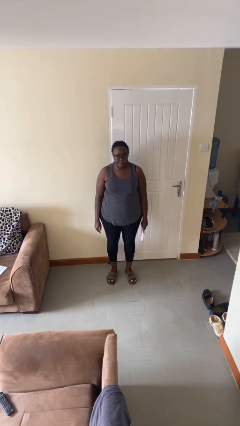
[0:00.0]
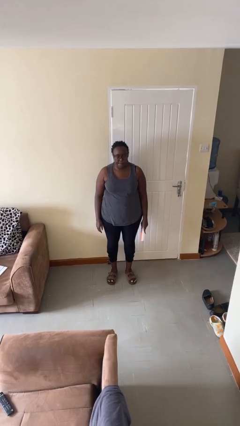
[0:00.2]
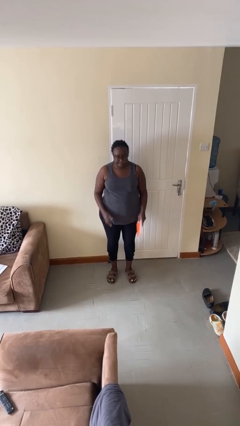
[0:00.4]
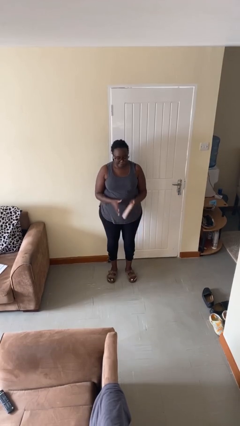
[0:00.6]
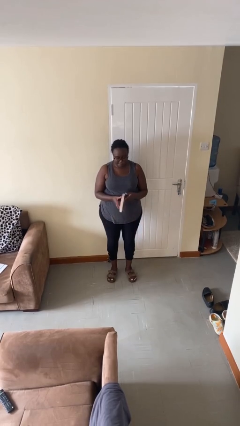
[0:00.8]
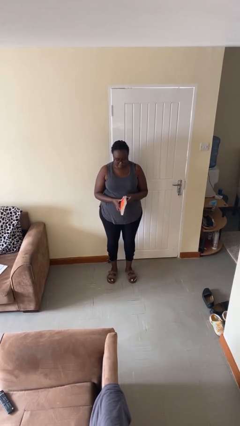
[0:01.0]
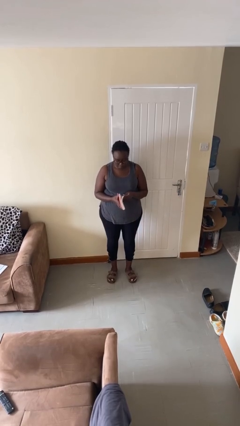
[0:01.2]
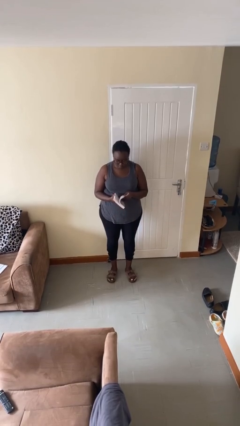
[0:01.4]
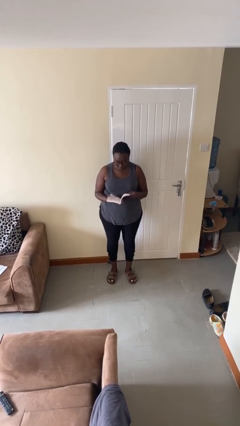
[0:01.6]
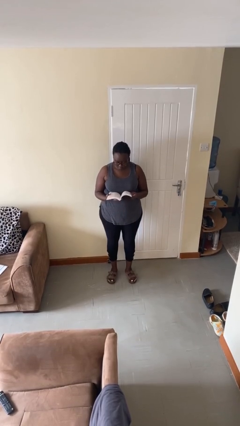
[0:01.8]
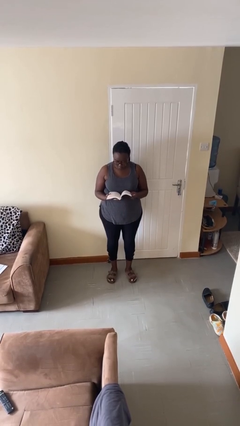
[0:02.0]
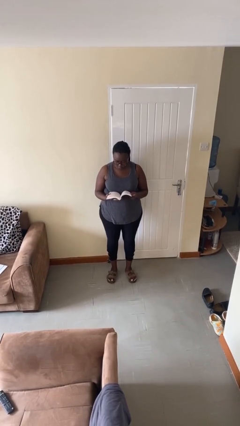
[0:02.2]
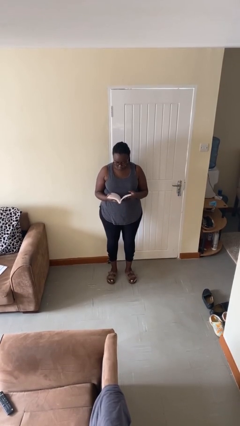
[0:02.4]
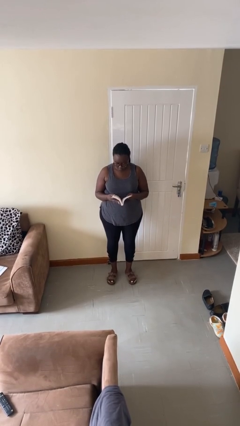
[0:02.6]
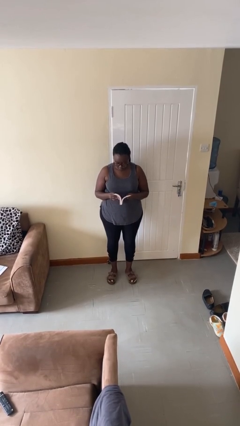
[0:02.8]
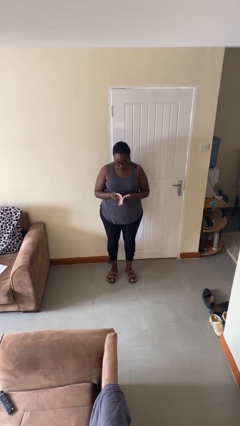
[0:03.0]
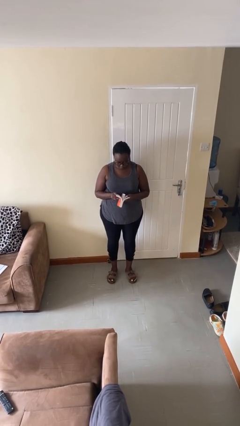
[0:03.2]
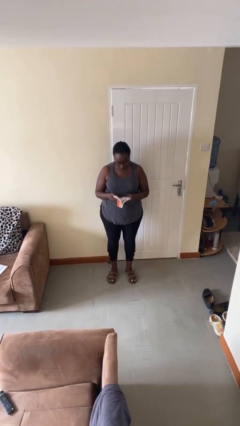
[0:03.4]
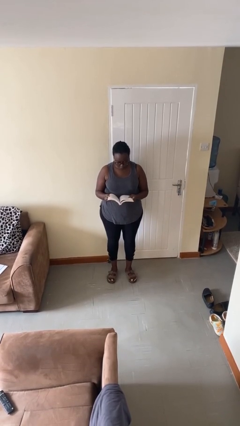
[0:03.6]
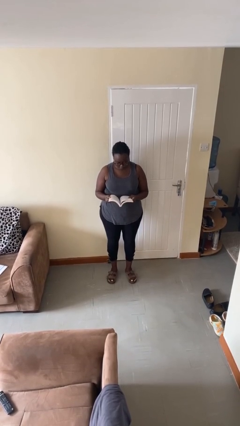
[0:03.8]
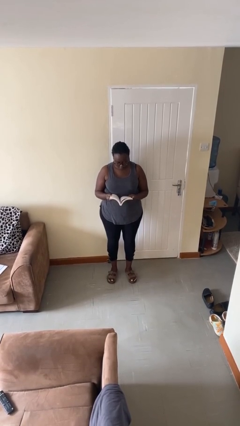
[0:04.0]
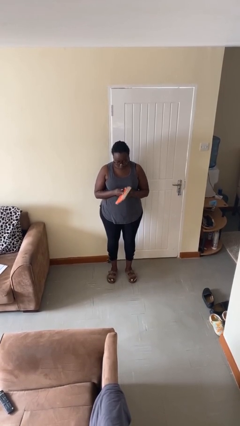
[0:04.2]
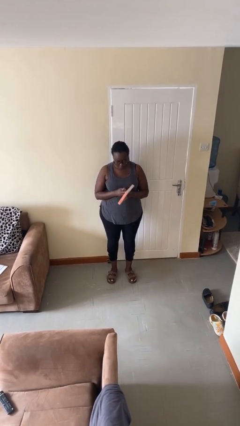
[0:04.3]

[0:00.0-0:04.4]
person reads book

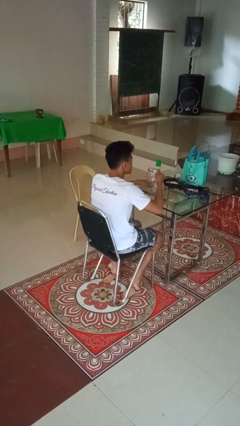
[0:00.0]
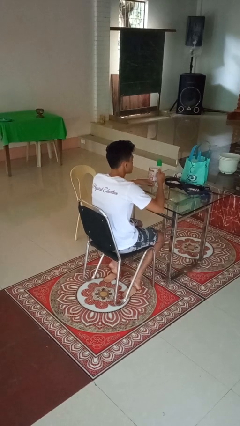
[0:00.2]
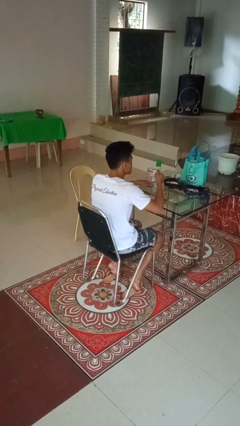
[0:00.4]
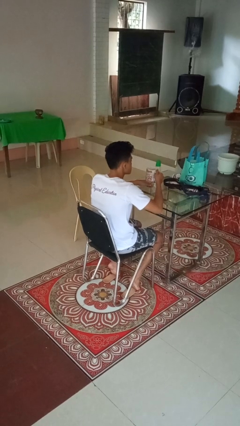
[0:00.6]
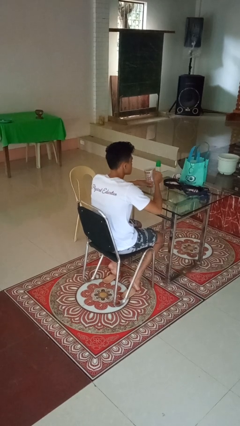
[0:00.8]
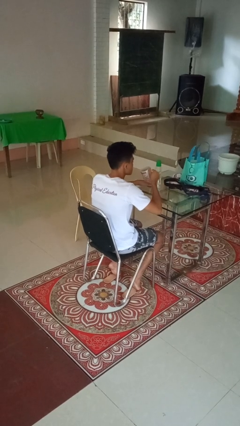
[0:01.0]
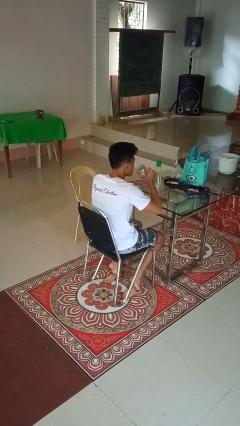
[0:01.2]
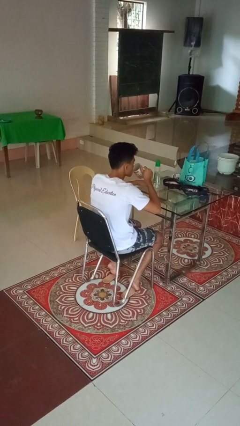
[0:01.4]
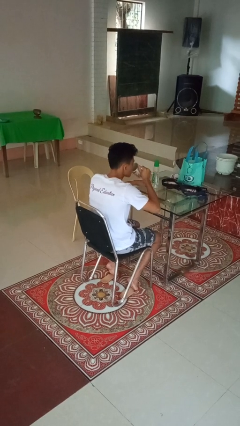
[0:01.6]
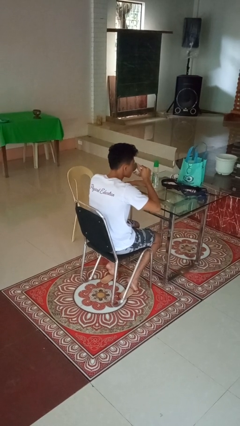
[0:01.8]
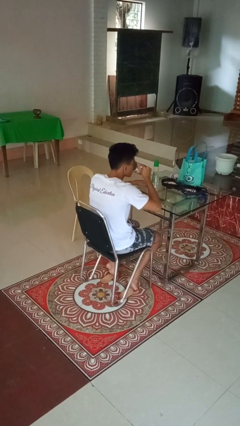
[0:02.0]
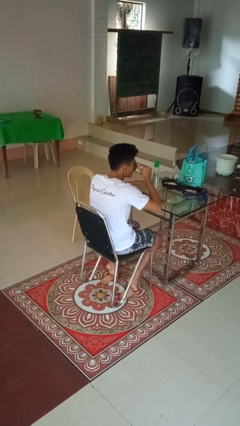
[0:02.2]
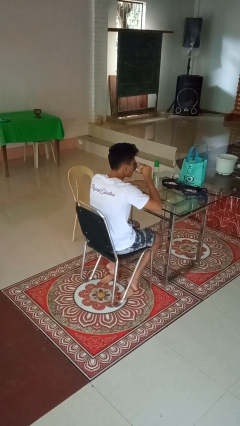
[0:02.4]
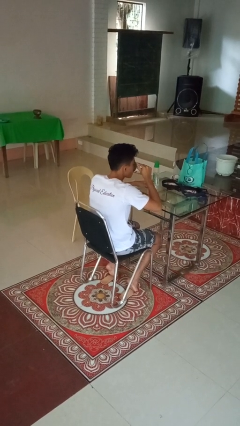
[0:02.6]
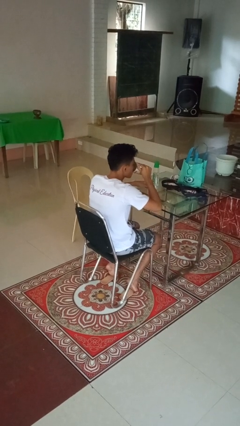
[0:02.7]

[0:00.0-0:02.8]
person picks up object from table

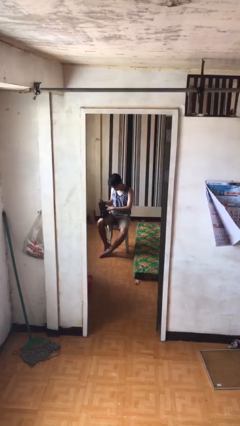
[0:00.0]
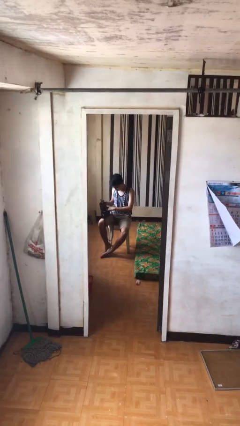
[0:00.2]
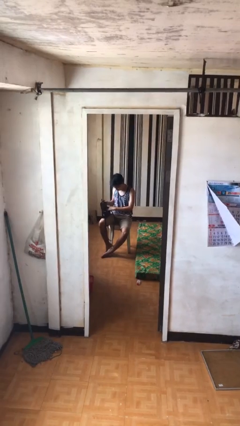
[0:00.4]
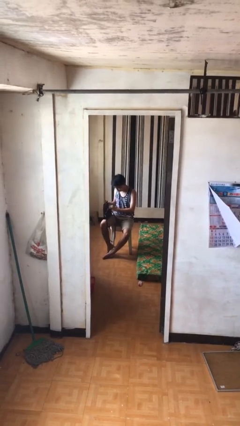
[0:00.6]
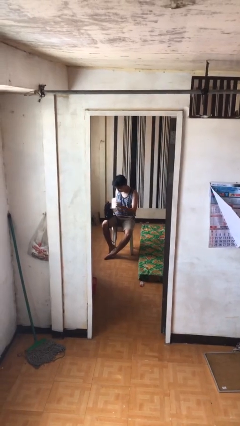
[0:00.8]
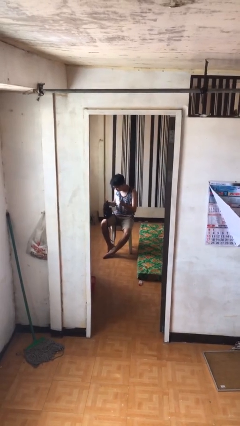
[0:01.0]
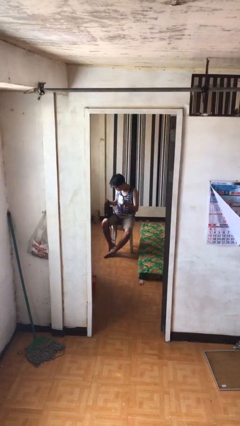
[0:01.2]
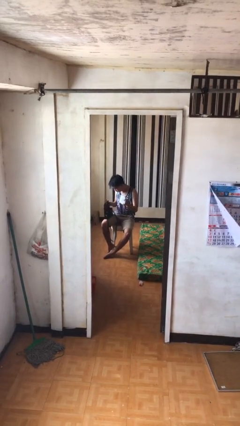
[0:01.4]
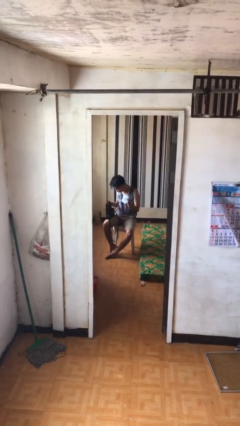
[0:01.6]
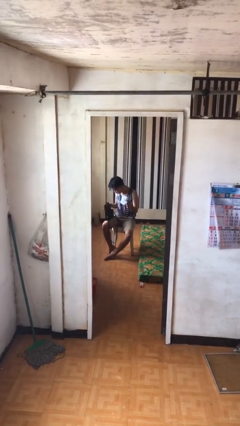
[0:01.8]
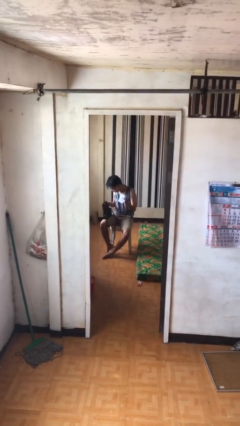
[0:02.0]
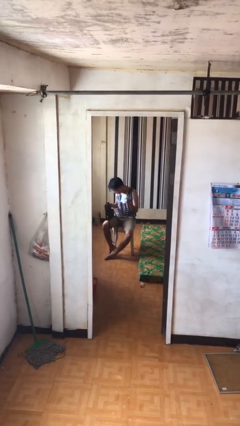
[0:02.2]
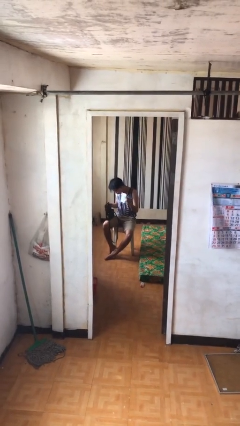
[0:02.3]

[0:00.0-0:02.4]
person takes object from purse

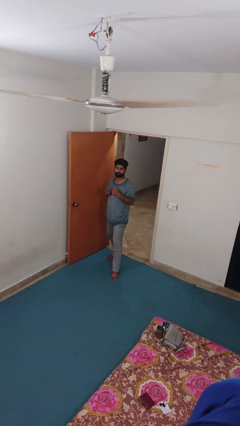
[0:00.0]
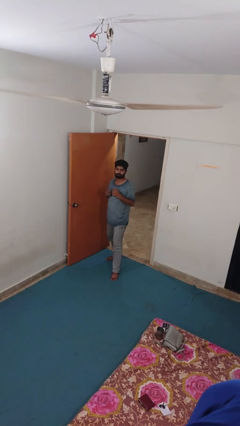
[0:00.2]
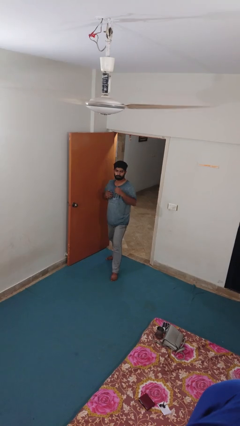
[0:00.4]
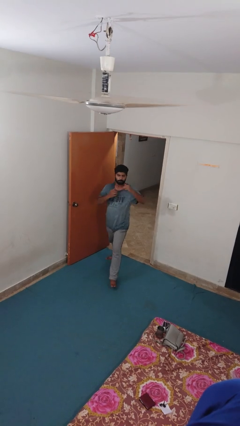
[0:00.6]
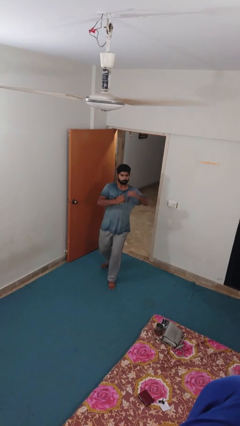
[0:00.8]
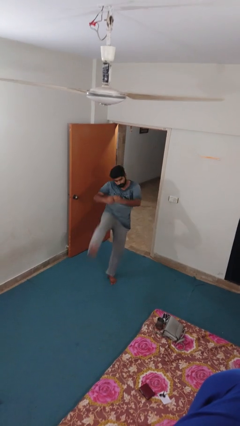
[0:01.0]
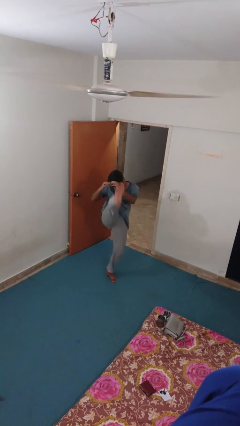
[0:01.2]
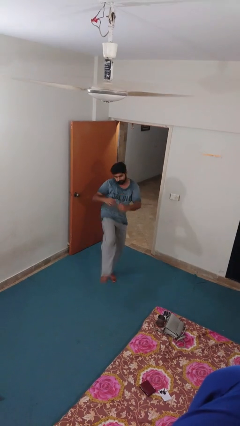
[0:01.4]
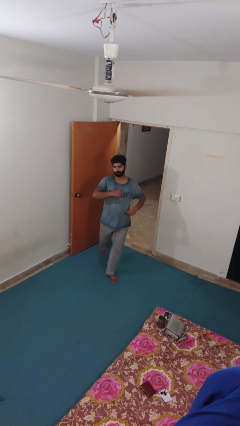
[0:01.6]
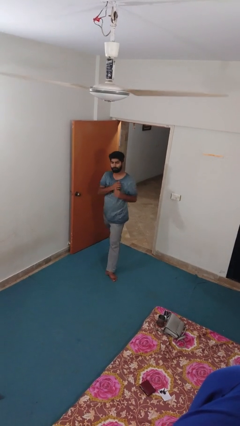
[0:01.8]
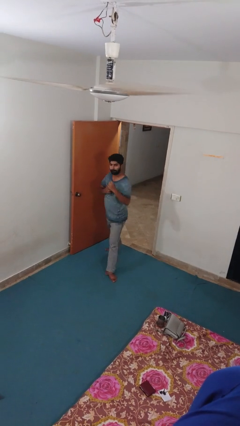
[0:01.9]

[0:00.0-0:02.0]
person karate kicks

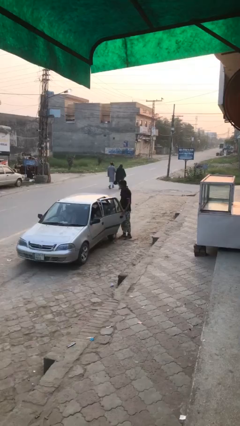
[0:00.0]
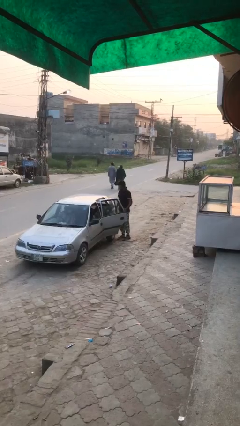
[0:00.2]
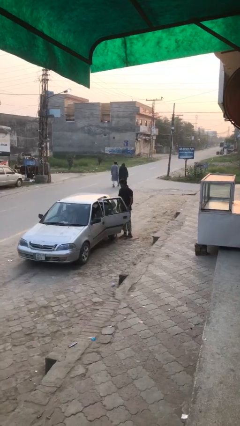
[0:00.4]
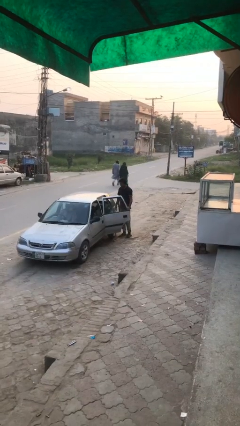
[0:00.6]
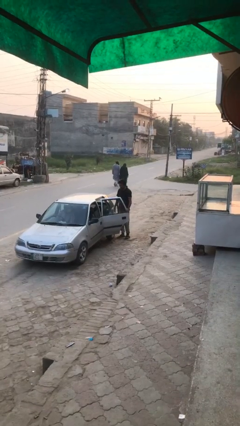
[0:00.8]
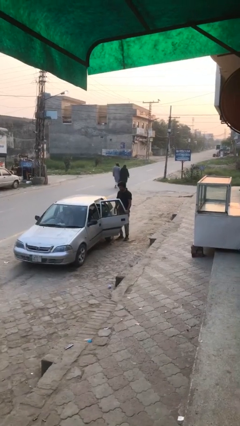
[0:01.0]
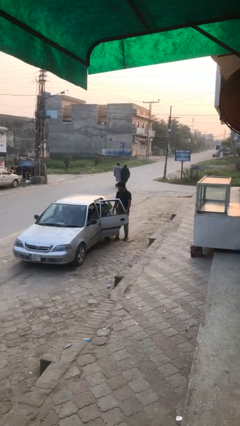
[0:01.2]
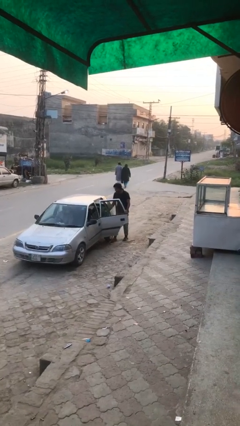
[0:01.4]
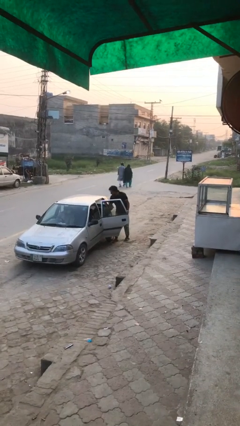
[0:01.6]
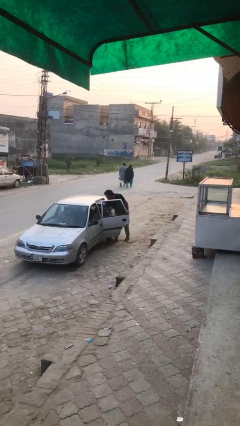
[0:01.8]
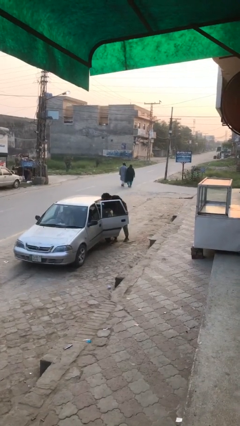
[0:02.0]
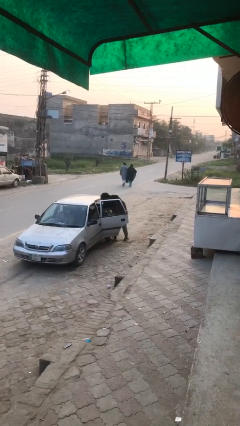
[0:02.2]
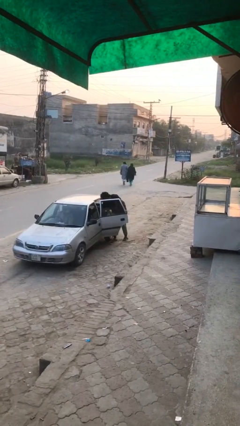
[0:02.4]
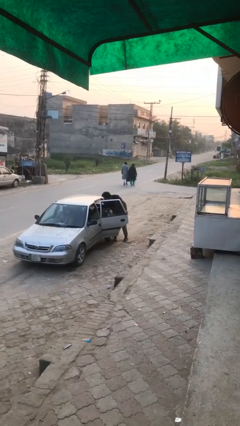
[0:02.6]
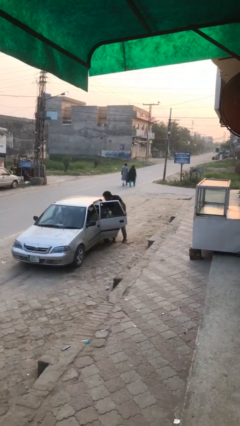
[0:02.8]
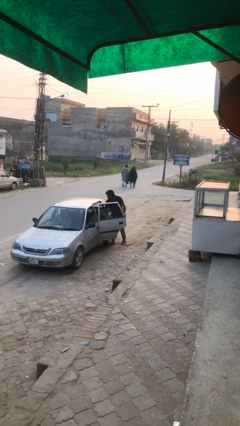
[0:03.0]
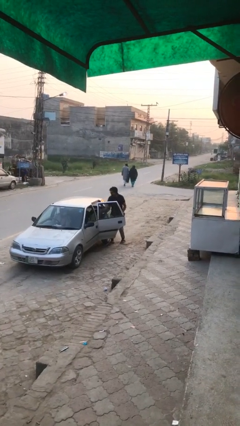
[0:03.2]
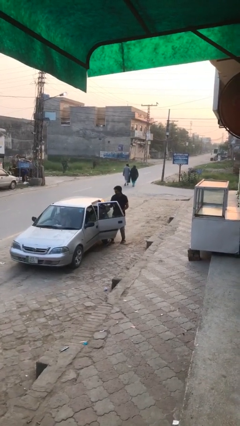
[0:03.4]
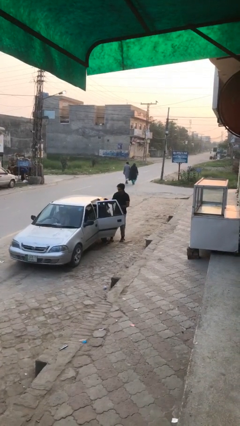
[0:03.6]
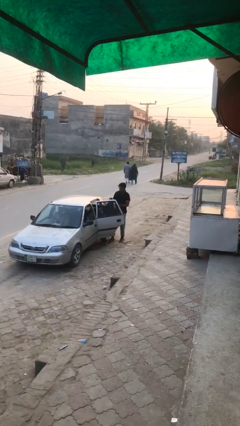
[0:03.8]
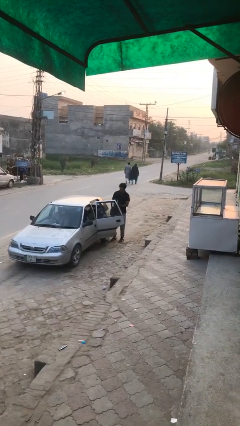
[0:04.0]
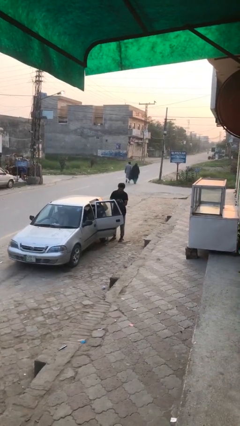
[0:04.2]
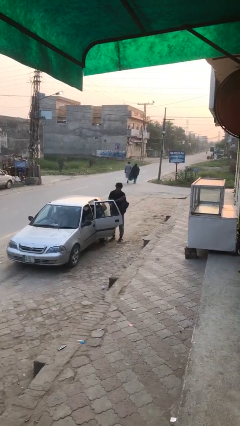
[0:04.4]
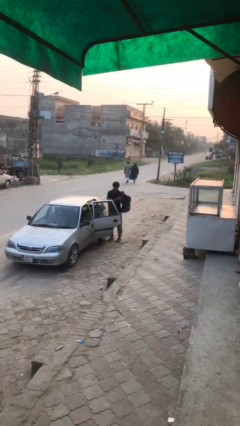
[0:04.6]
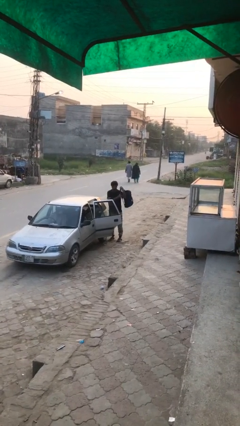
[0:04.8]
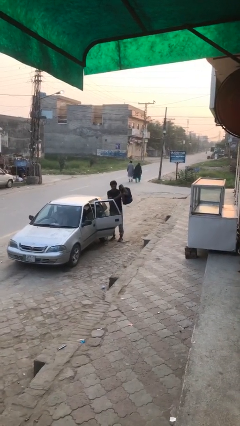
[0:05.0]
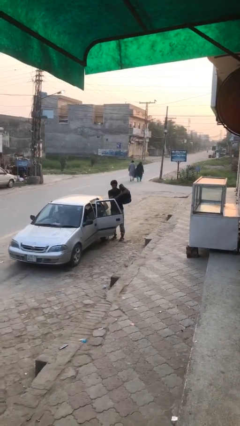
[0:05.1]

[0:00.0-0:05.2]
person unloads car

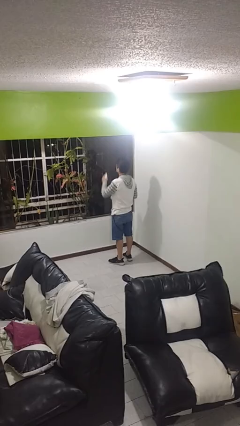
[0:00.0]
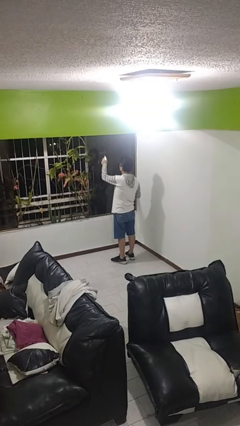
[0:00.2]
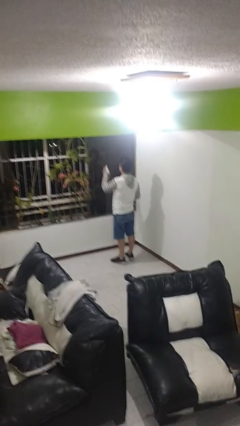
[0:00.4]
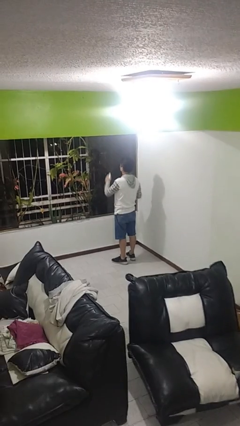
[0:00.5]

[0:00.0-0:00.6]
person sprays from bottle
